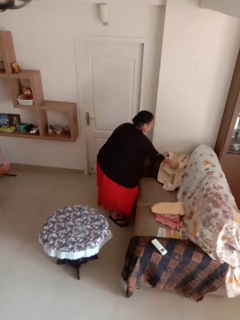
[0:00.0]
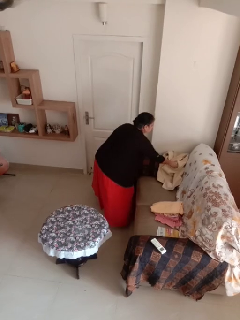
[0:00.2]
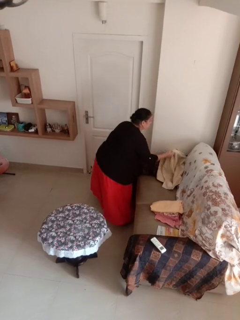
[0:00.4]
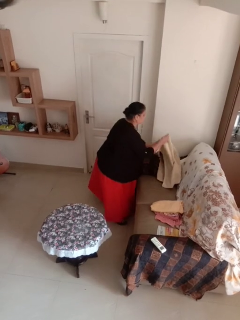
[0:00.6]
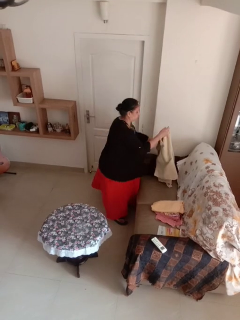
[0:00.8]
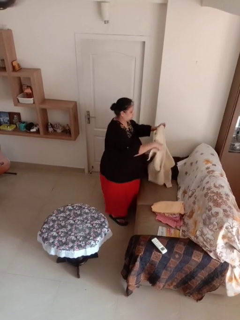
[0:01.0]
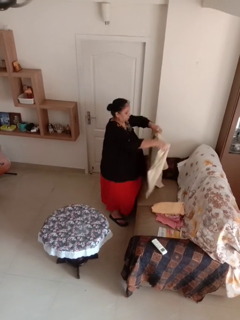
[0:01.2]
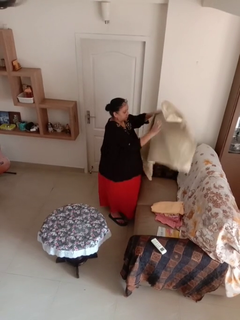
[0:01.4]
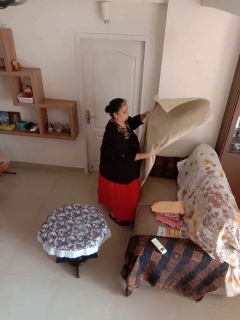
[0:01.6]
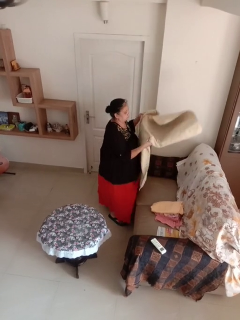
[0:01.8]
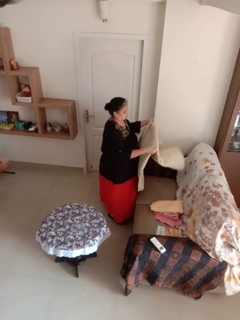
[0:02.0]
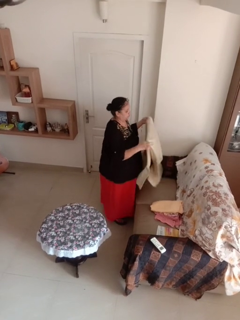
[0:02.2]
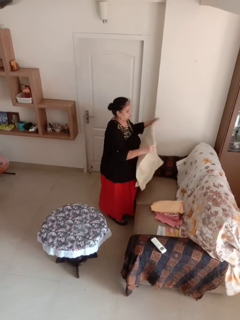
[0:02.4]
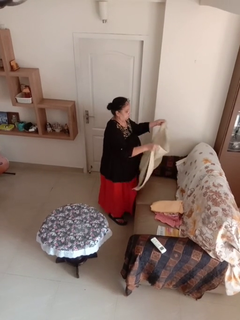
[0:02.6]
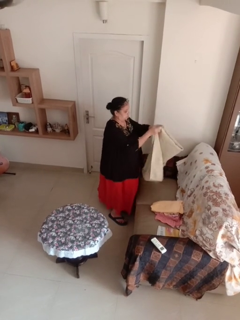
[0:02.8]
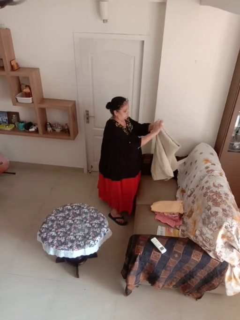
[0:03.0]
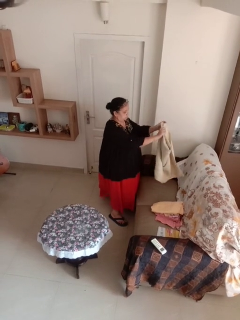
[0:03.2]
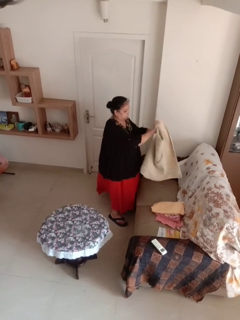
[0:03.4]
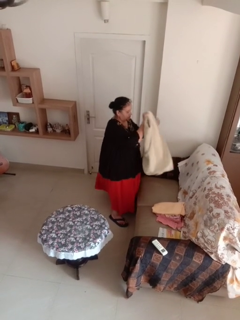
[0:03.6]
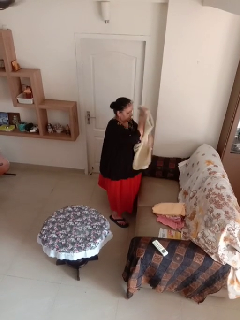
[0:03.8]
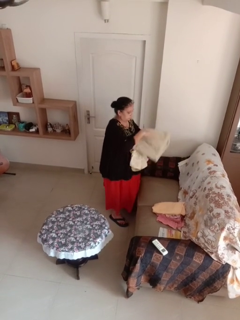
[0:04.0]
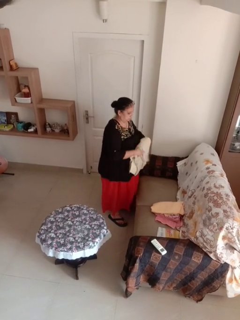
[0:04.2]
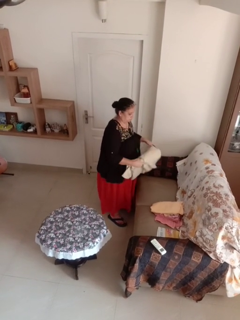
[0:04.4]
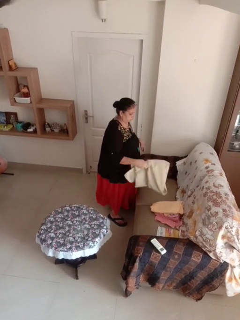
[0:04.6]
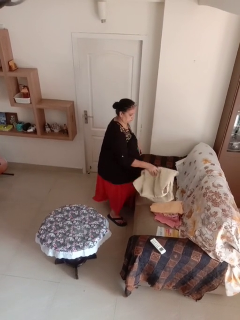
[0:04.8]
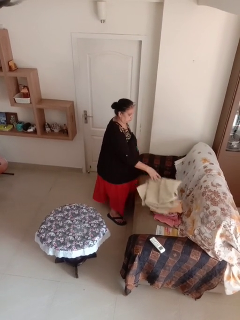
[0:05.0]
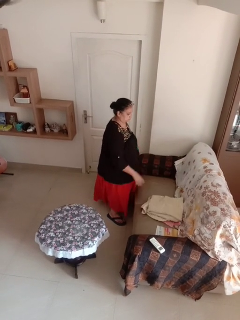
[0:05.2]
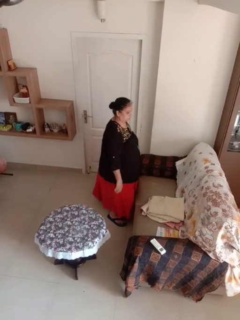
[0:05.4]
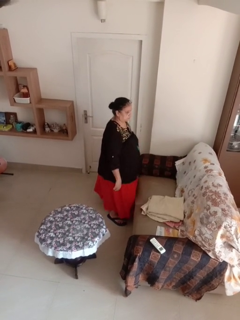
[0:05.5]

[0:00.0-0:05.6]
person folds towel

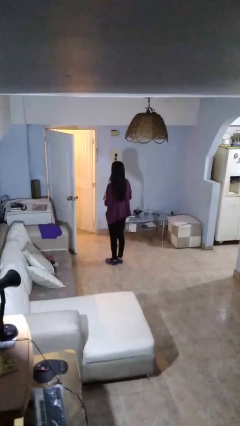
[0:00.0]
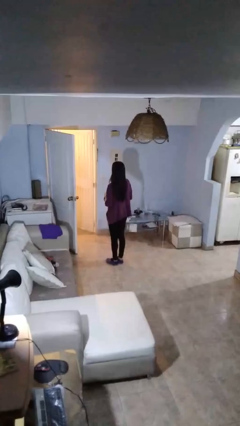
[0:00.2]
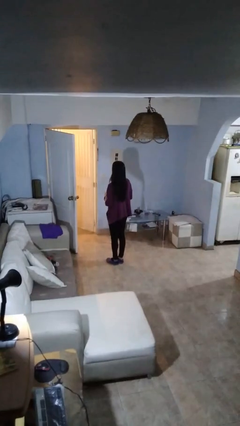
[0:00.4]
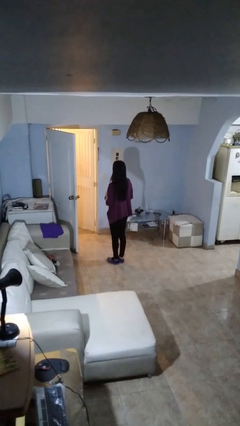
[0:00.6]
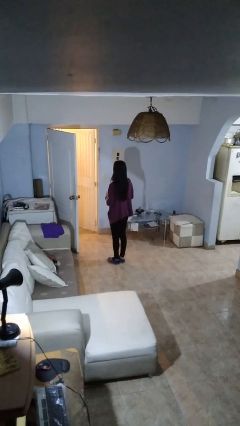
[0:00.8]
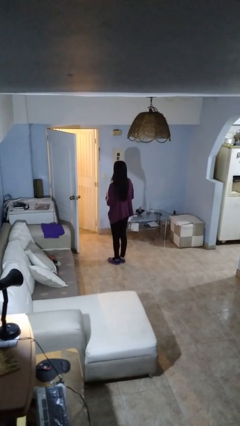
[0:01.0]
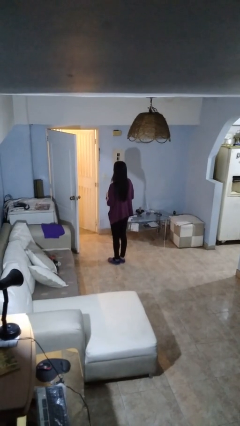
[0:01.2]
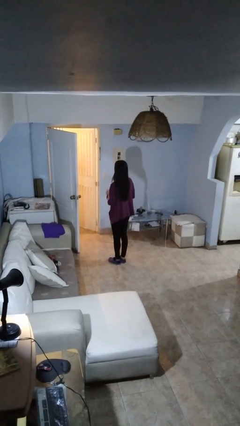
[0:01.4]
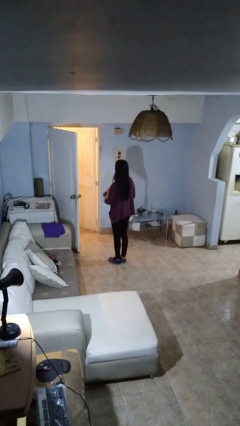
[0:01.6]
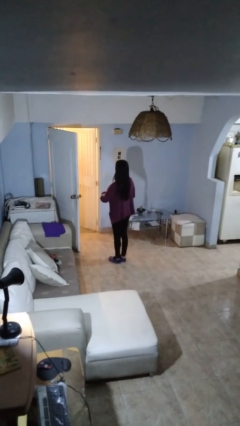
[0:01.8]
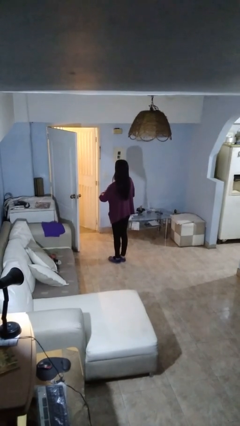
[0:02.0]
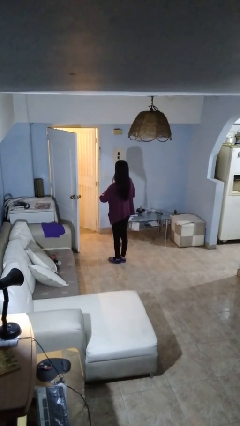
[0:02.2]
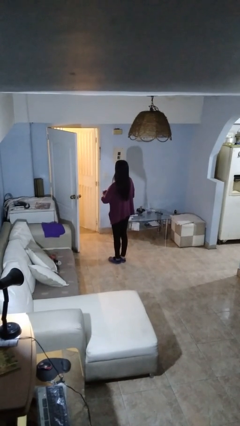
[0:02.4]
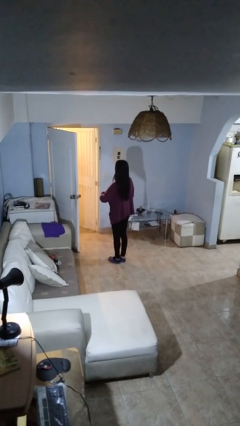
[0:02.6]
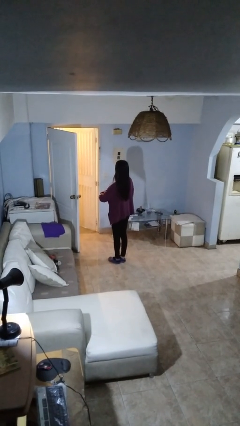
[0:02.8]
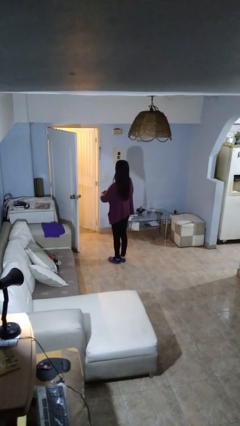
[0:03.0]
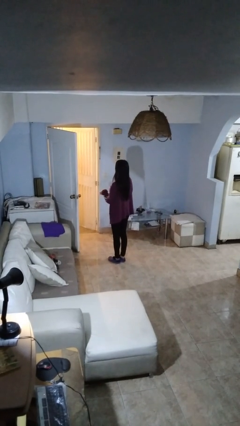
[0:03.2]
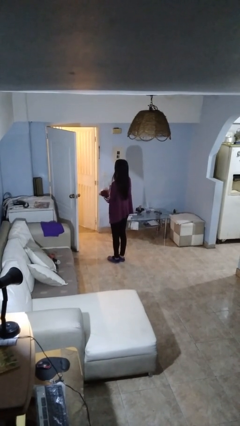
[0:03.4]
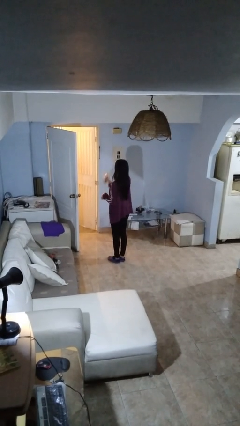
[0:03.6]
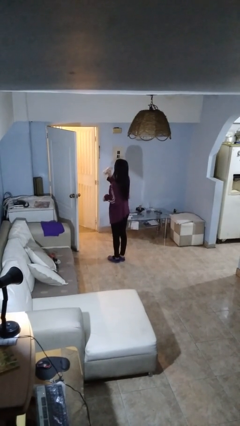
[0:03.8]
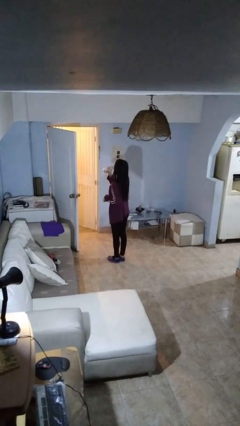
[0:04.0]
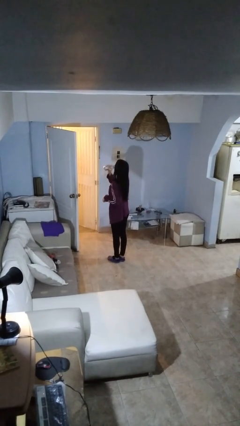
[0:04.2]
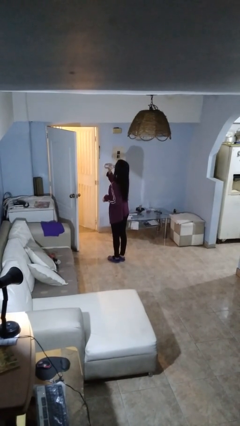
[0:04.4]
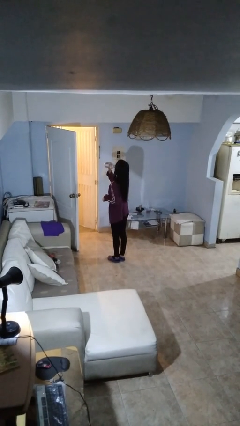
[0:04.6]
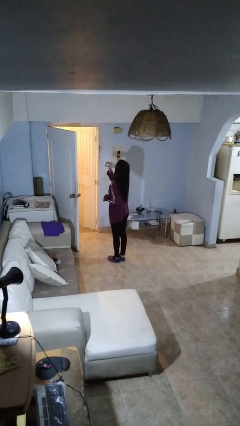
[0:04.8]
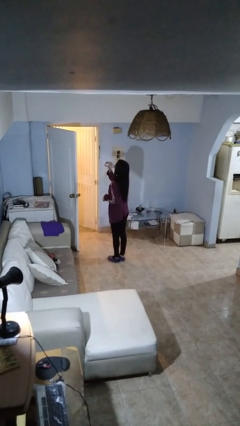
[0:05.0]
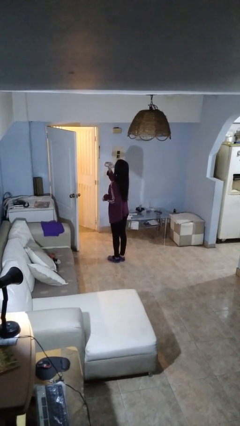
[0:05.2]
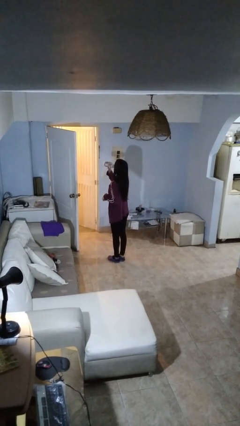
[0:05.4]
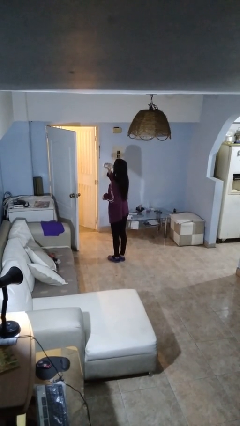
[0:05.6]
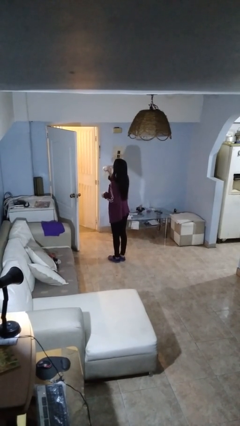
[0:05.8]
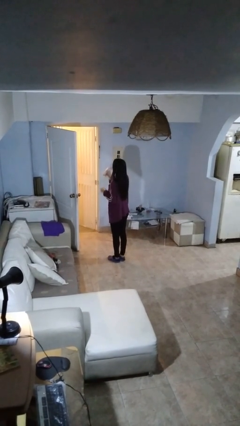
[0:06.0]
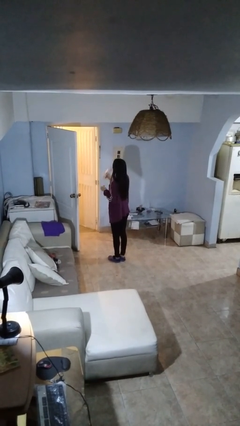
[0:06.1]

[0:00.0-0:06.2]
person drinks from bottle

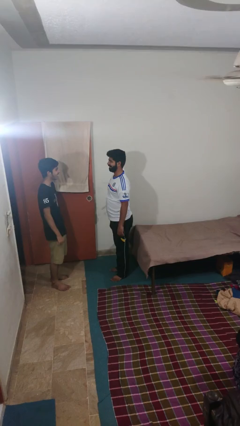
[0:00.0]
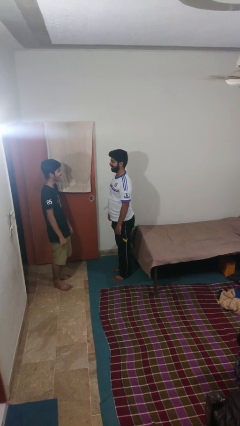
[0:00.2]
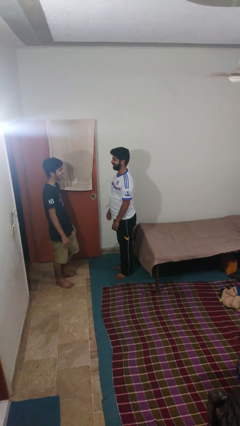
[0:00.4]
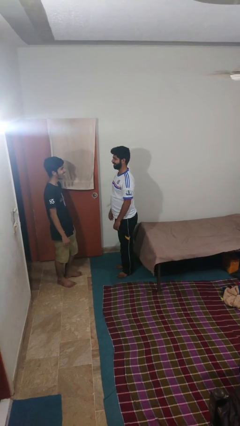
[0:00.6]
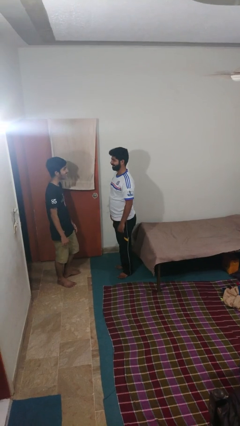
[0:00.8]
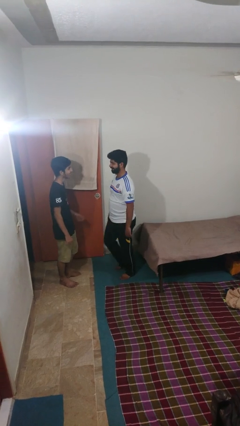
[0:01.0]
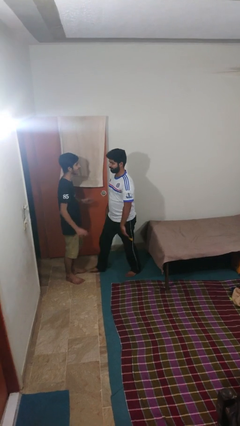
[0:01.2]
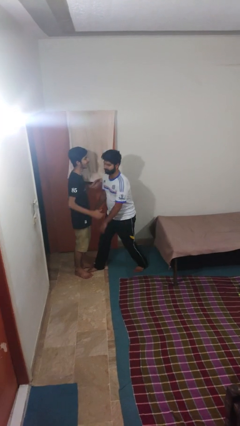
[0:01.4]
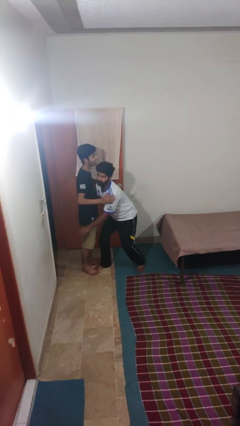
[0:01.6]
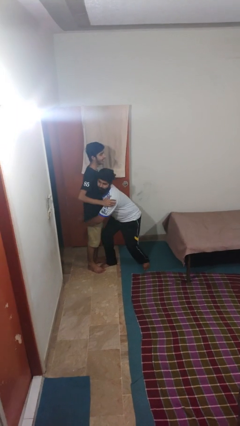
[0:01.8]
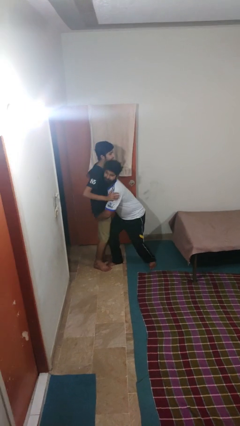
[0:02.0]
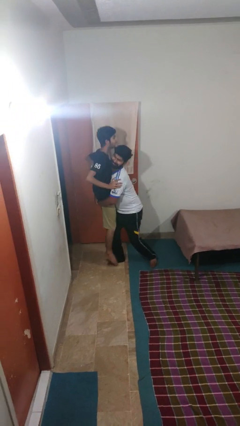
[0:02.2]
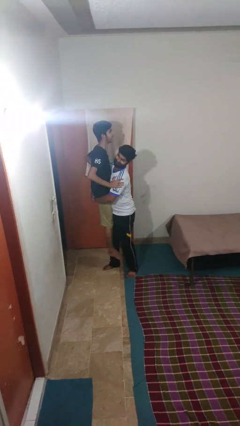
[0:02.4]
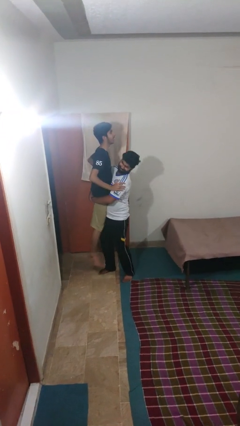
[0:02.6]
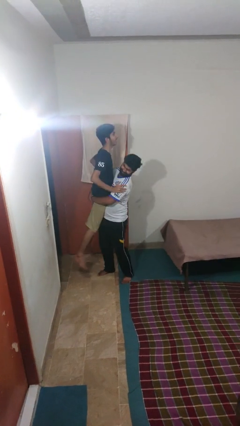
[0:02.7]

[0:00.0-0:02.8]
person picks up person

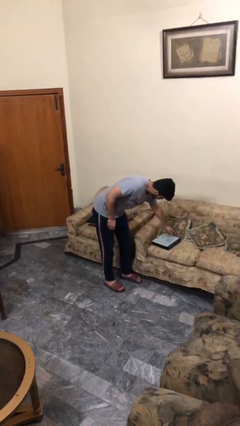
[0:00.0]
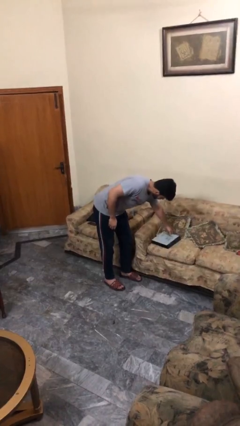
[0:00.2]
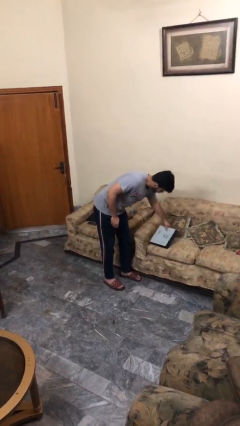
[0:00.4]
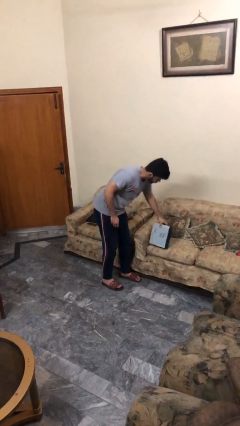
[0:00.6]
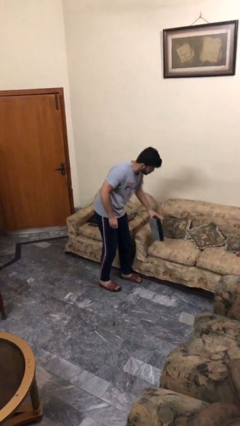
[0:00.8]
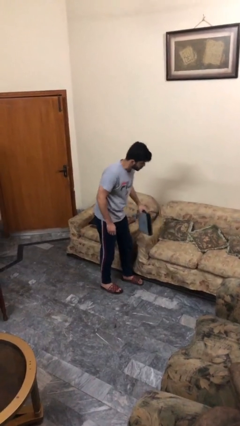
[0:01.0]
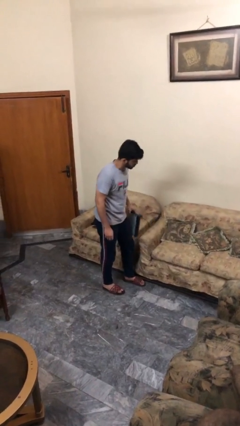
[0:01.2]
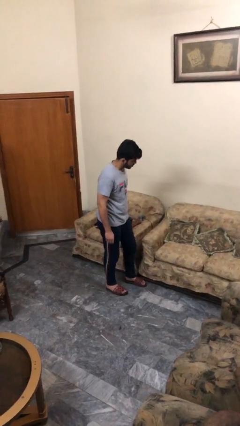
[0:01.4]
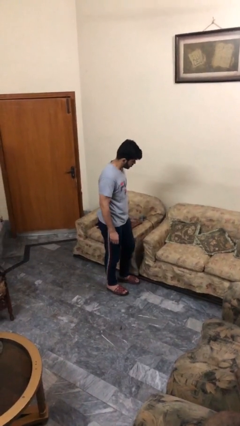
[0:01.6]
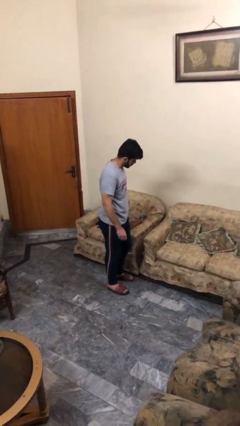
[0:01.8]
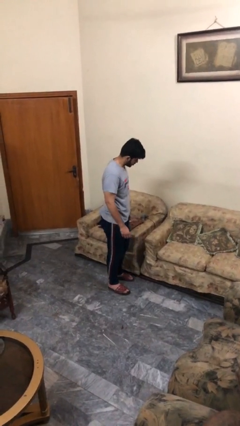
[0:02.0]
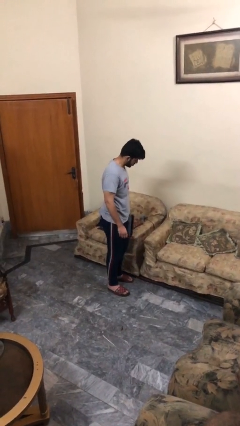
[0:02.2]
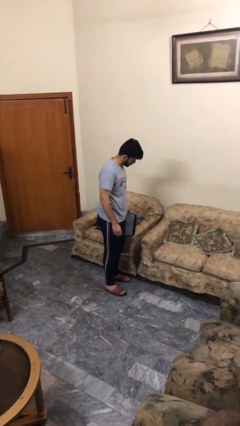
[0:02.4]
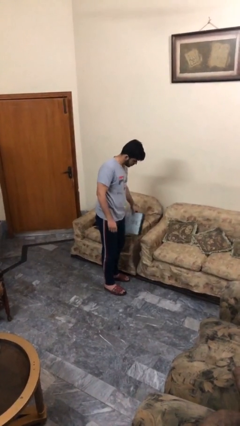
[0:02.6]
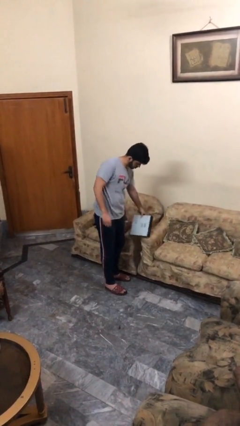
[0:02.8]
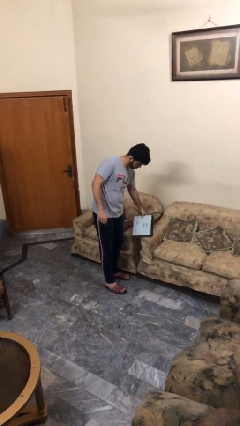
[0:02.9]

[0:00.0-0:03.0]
person picks up object from couch

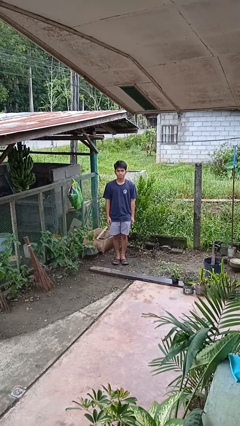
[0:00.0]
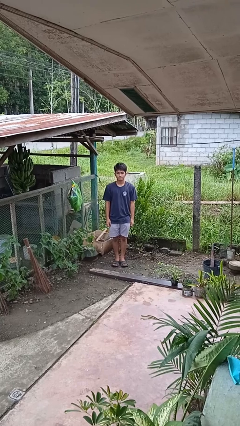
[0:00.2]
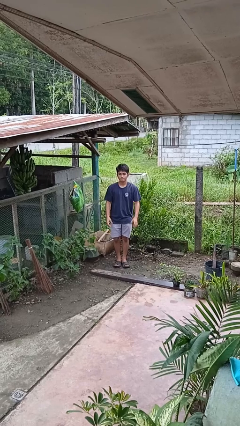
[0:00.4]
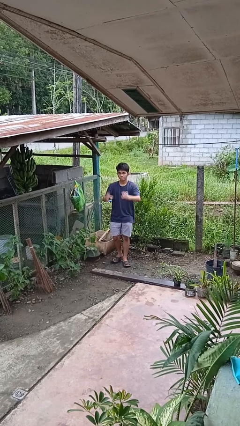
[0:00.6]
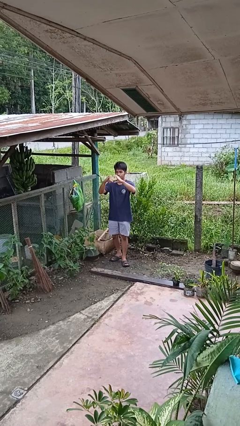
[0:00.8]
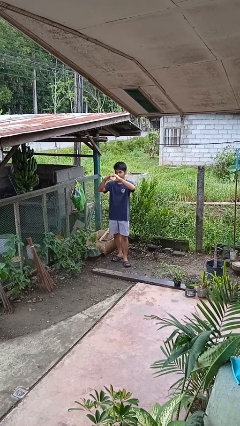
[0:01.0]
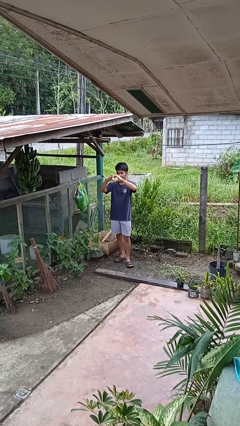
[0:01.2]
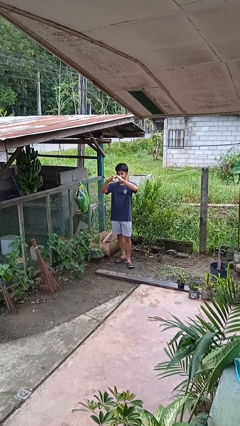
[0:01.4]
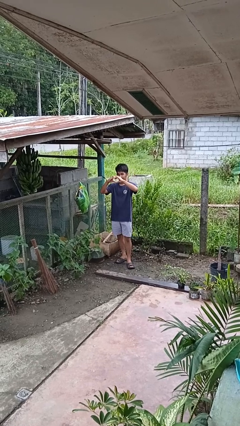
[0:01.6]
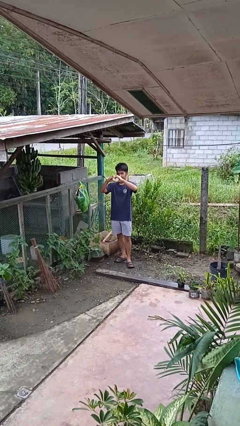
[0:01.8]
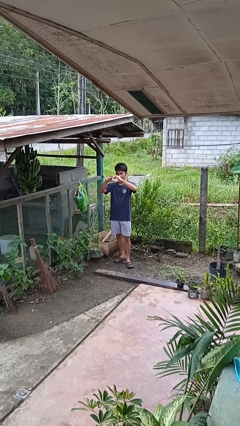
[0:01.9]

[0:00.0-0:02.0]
person gestures heart
